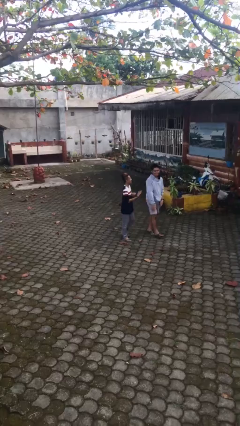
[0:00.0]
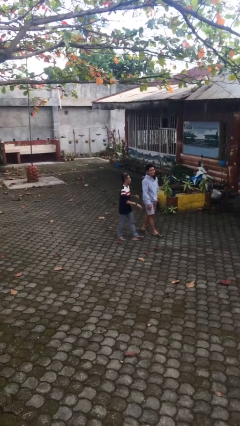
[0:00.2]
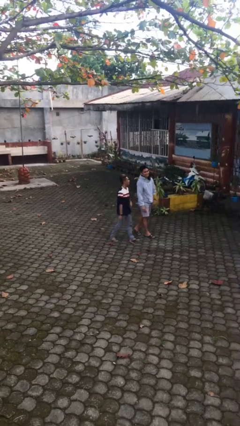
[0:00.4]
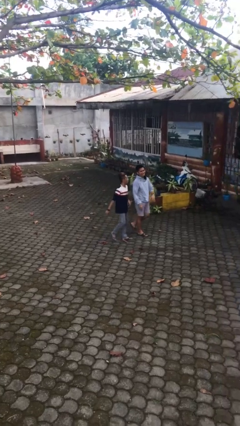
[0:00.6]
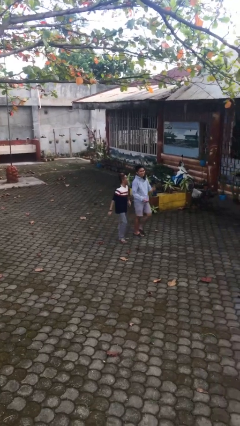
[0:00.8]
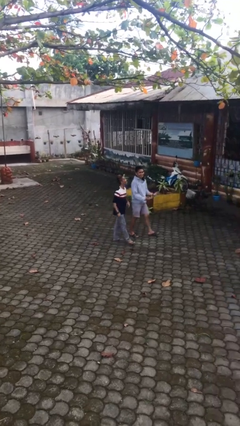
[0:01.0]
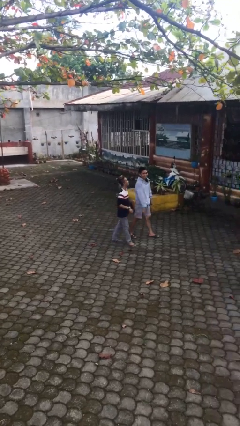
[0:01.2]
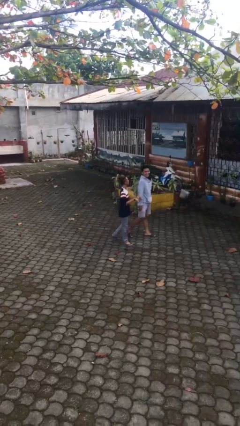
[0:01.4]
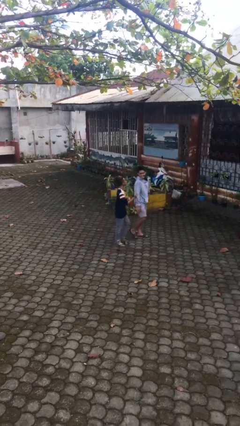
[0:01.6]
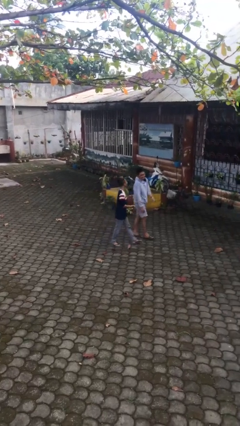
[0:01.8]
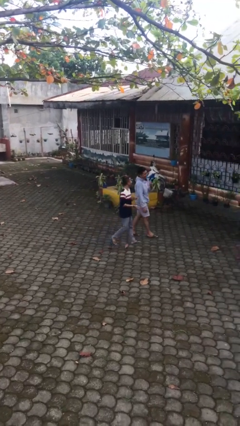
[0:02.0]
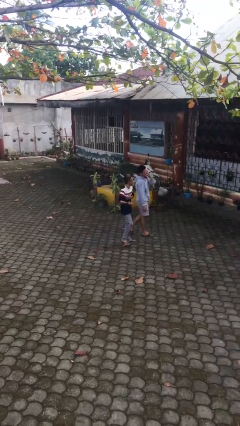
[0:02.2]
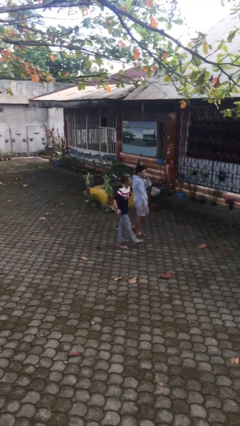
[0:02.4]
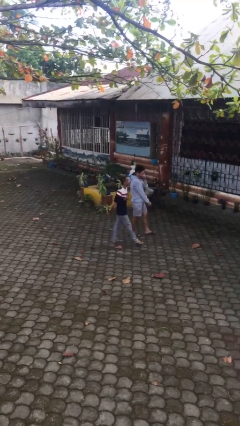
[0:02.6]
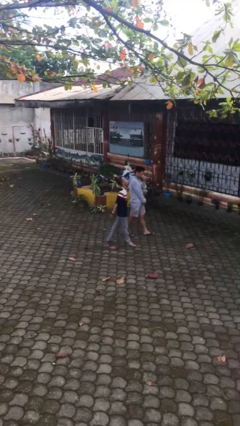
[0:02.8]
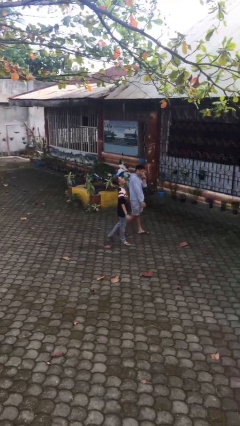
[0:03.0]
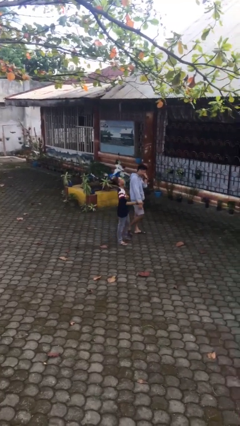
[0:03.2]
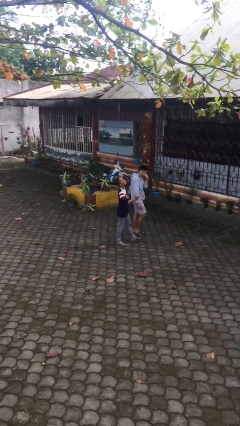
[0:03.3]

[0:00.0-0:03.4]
person talks to person

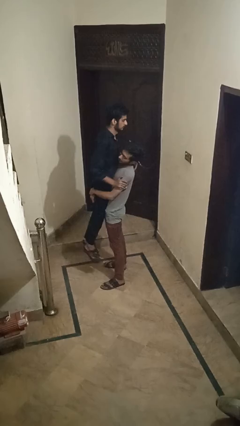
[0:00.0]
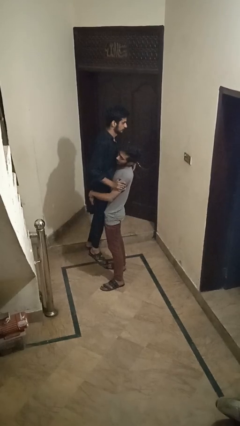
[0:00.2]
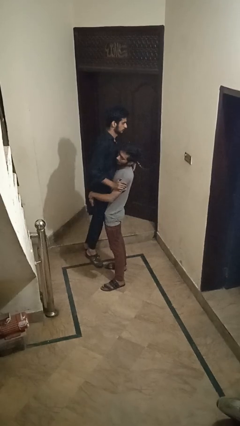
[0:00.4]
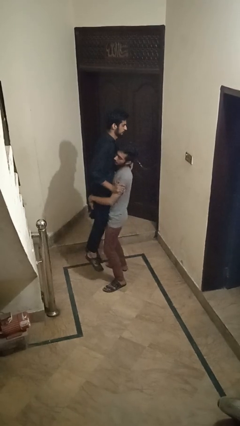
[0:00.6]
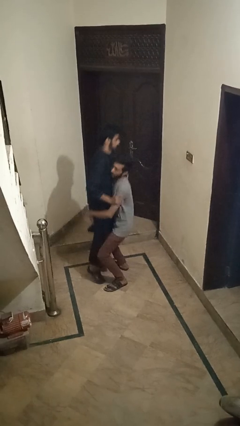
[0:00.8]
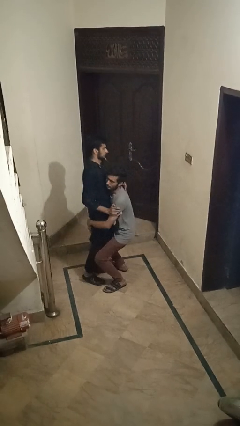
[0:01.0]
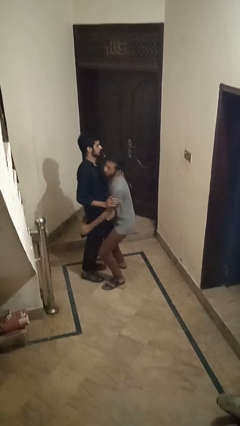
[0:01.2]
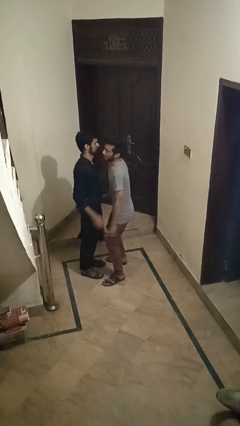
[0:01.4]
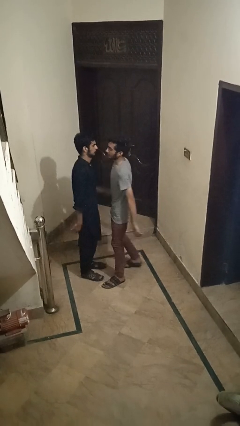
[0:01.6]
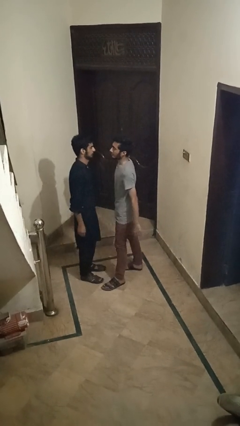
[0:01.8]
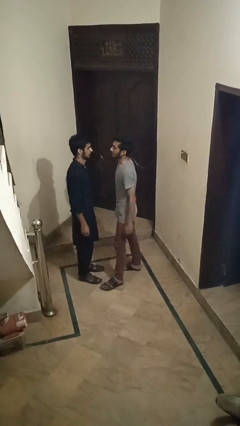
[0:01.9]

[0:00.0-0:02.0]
person puts down person

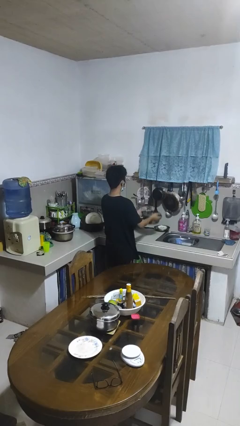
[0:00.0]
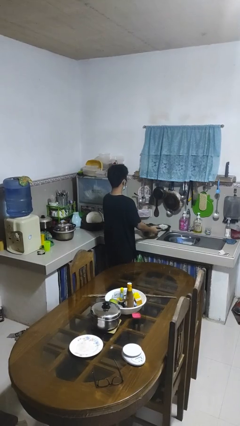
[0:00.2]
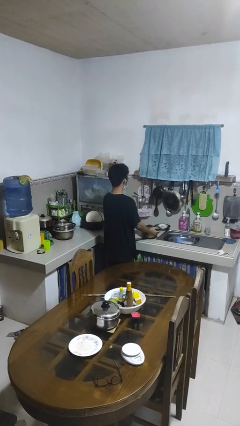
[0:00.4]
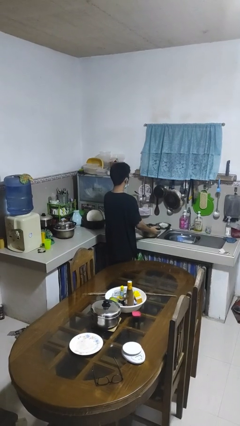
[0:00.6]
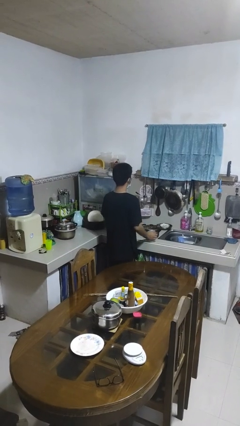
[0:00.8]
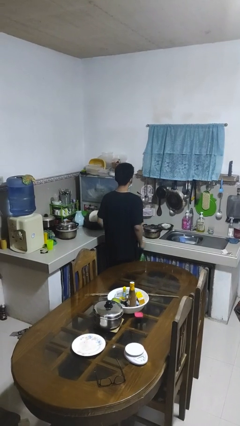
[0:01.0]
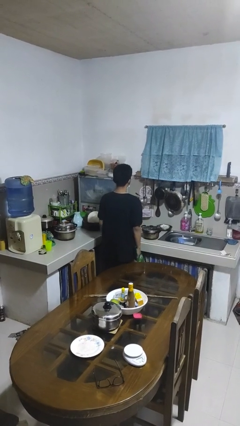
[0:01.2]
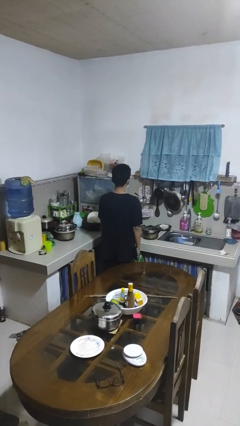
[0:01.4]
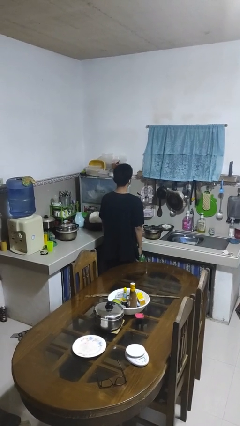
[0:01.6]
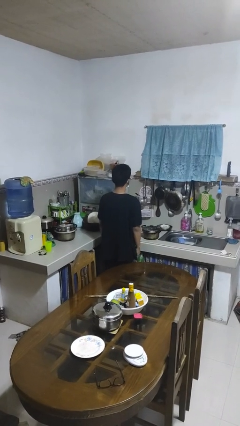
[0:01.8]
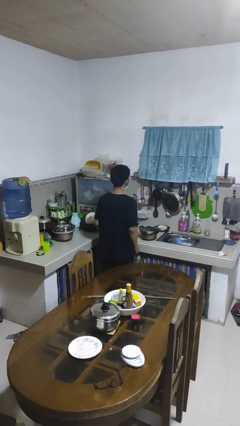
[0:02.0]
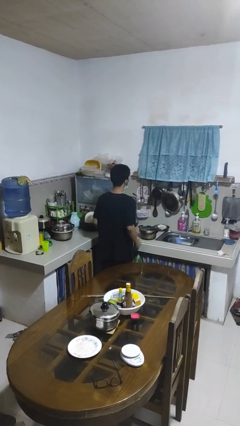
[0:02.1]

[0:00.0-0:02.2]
person puts down object on countertop

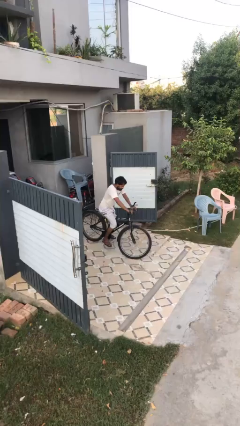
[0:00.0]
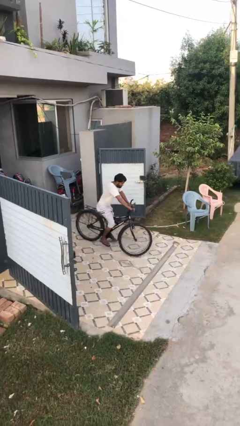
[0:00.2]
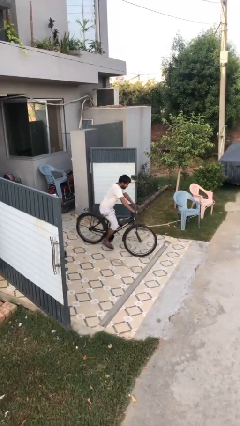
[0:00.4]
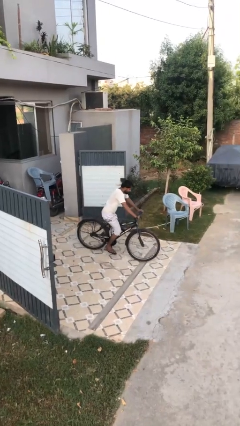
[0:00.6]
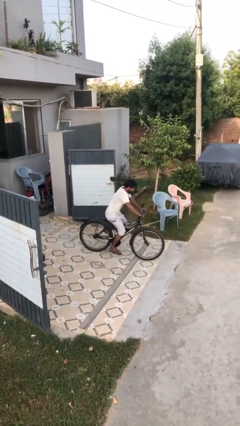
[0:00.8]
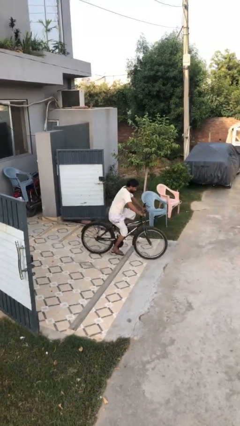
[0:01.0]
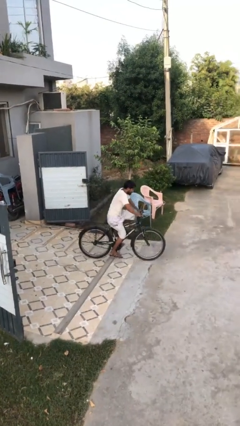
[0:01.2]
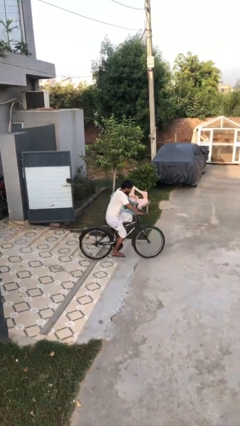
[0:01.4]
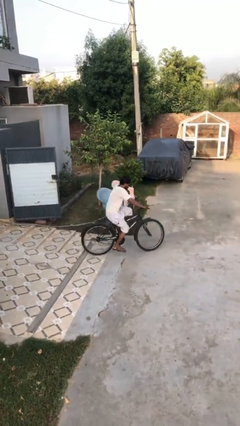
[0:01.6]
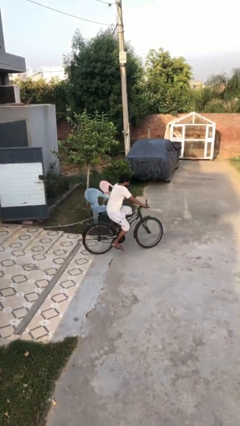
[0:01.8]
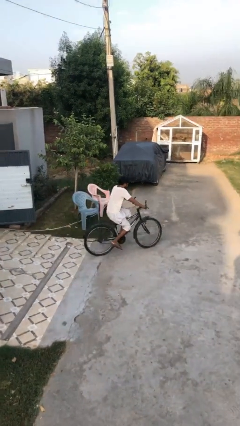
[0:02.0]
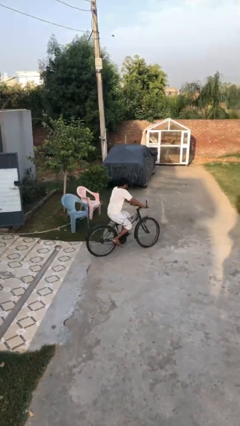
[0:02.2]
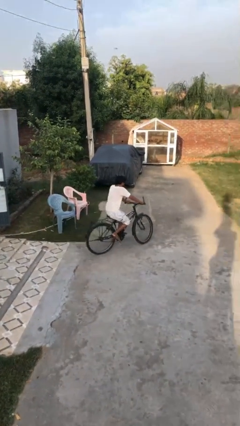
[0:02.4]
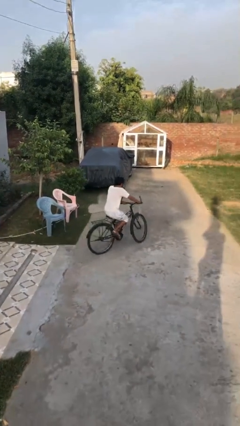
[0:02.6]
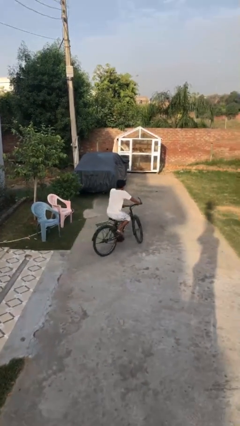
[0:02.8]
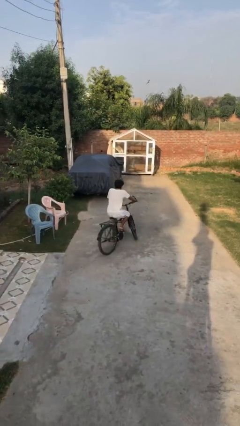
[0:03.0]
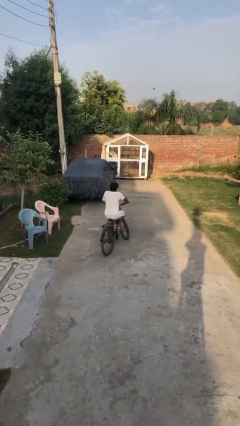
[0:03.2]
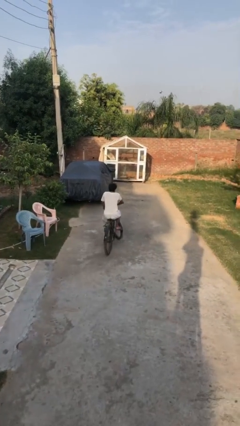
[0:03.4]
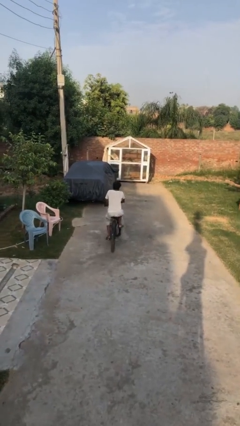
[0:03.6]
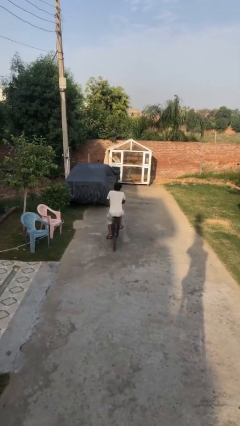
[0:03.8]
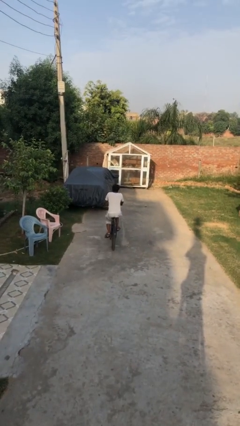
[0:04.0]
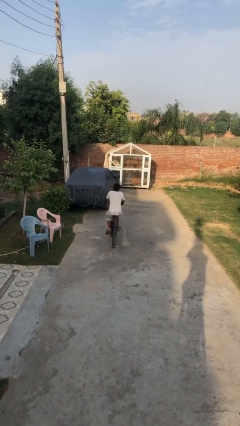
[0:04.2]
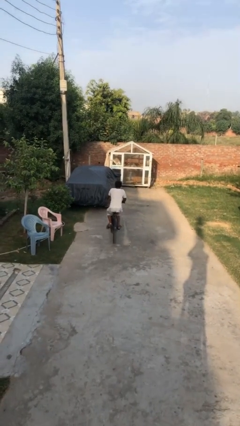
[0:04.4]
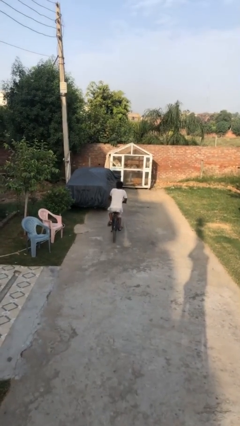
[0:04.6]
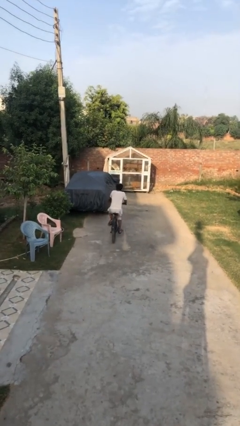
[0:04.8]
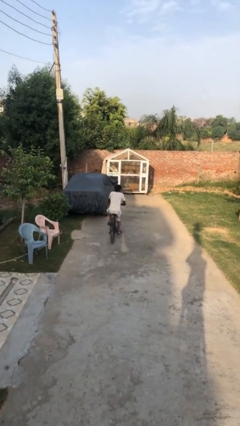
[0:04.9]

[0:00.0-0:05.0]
person rides bicycle

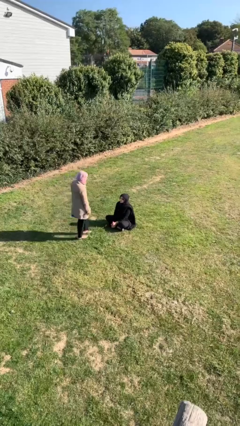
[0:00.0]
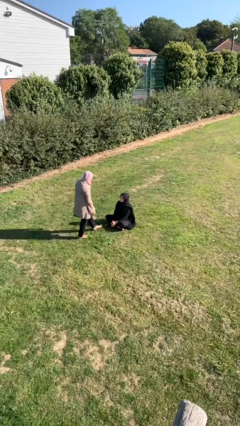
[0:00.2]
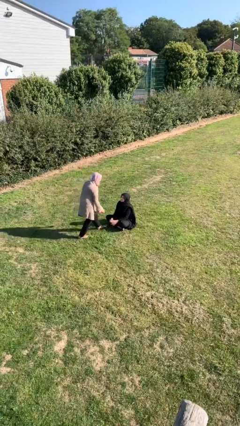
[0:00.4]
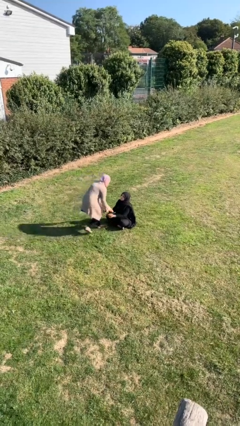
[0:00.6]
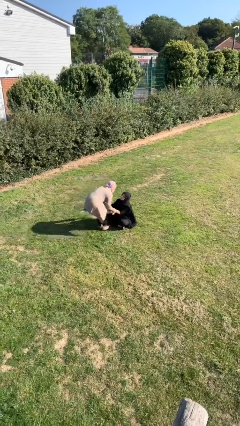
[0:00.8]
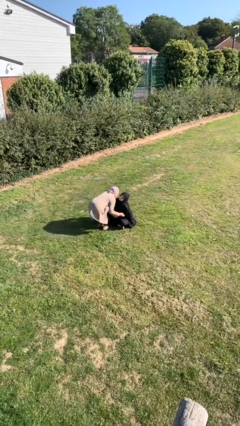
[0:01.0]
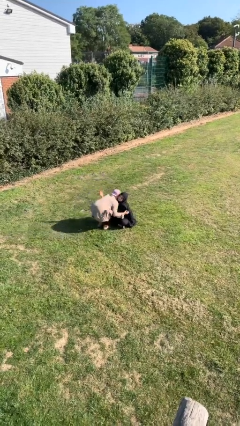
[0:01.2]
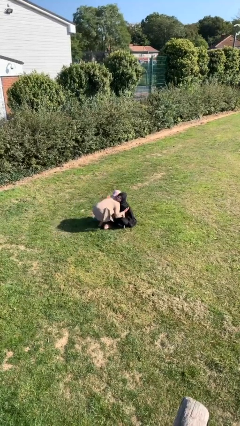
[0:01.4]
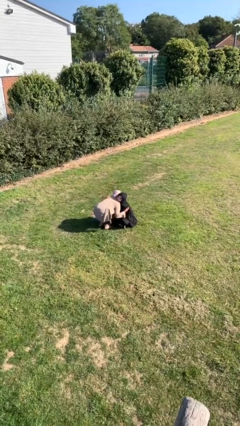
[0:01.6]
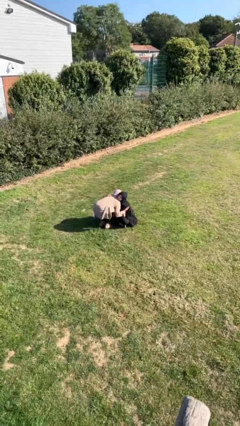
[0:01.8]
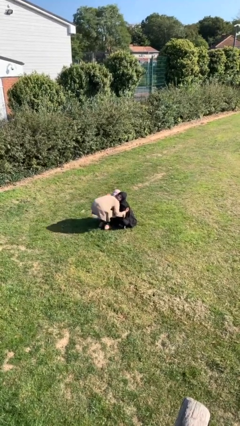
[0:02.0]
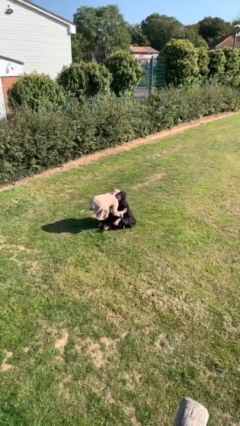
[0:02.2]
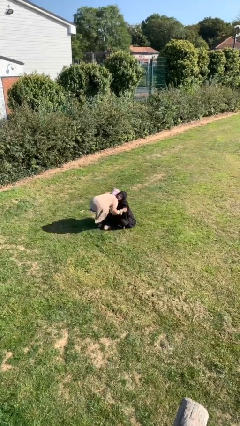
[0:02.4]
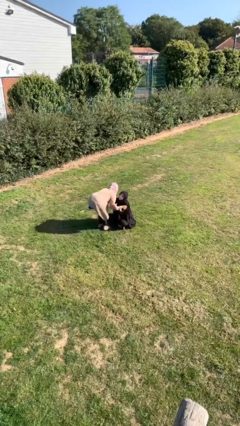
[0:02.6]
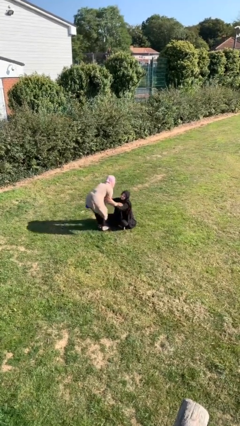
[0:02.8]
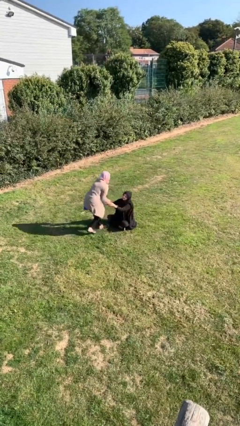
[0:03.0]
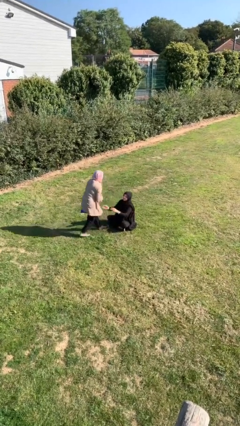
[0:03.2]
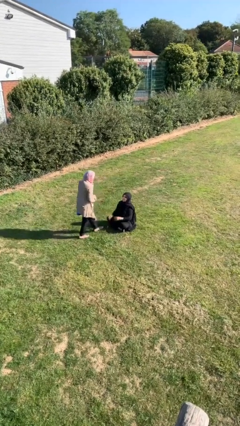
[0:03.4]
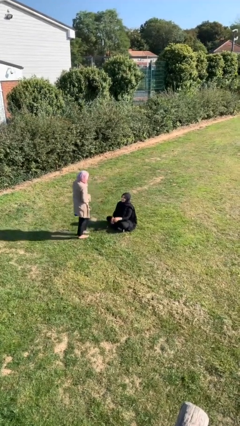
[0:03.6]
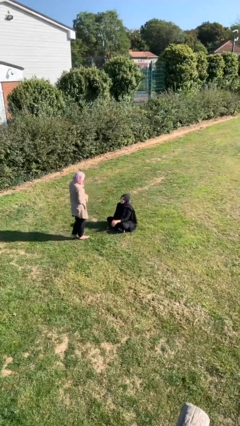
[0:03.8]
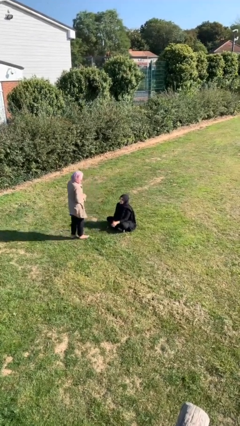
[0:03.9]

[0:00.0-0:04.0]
person embraces person

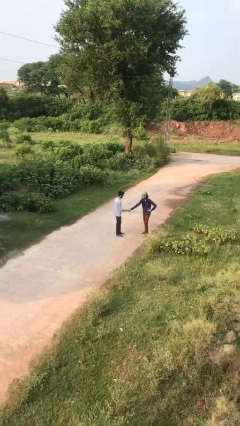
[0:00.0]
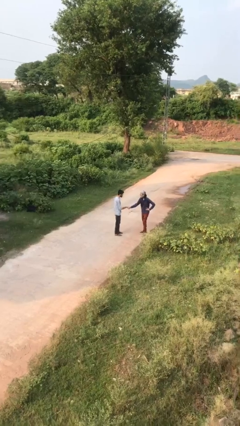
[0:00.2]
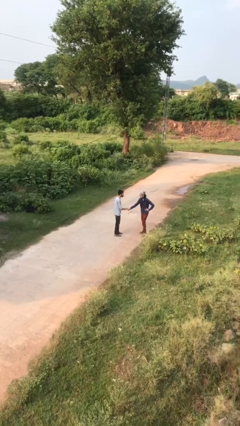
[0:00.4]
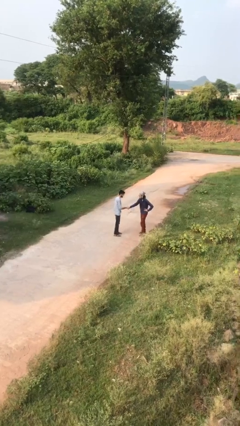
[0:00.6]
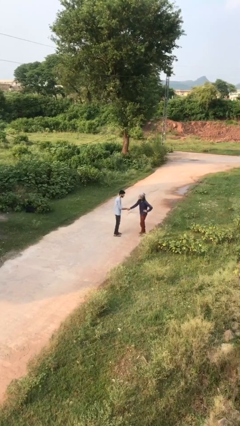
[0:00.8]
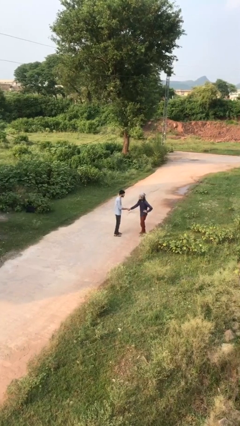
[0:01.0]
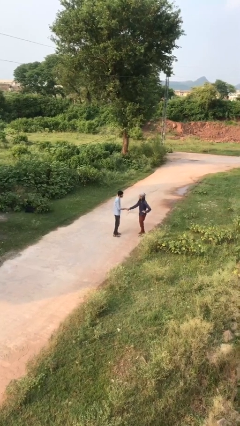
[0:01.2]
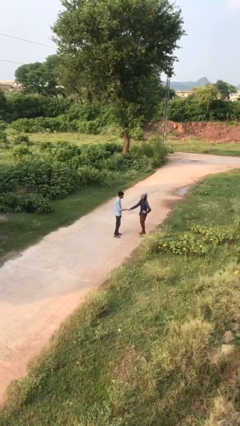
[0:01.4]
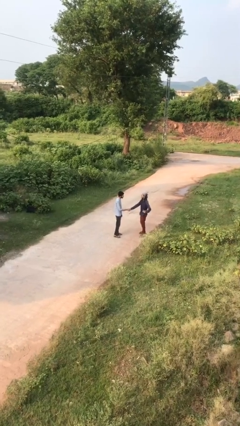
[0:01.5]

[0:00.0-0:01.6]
person shakes hand
